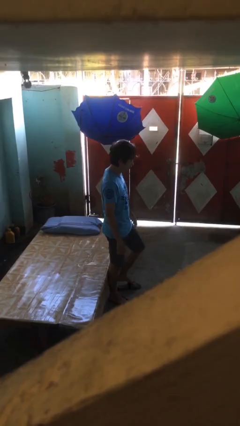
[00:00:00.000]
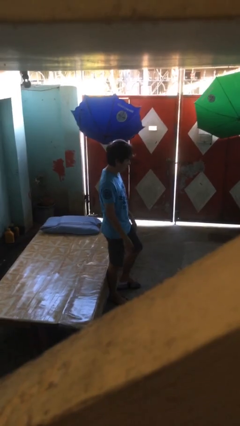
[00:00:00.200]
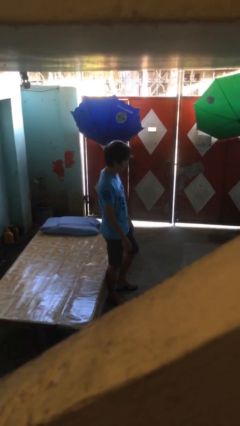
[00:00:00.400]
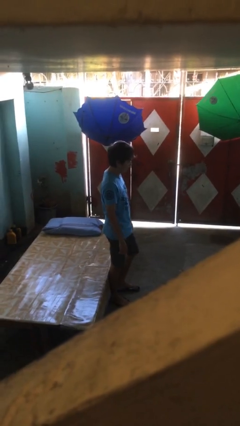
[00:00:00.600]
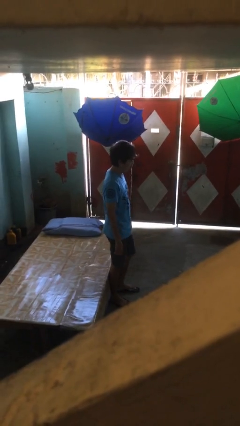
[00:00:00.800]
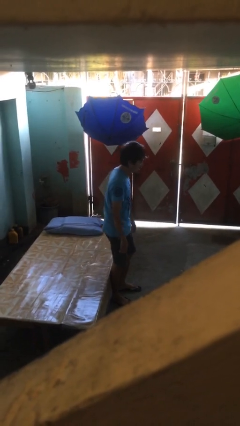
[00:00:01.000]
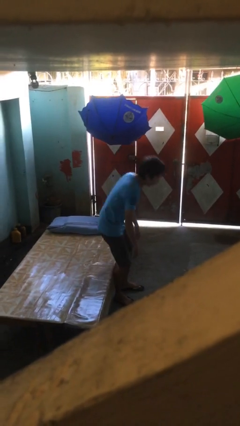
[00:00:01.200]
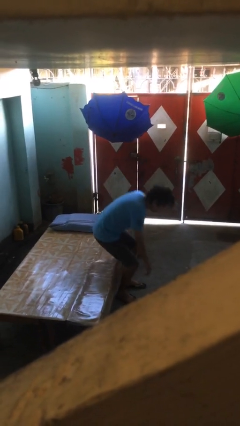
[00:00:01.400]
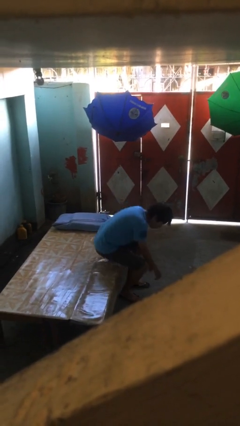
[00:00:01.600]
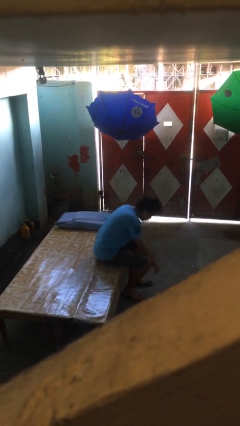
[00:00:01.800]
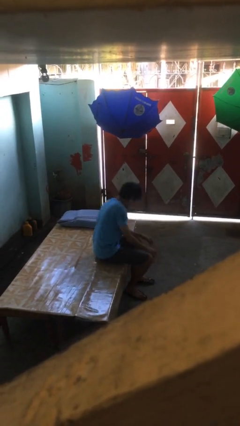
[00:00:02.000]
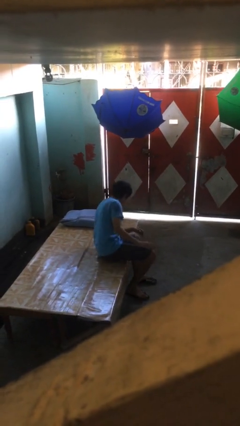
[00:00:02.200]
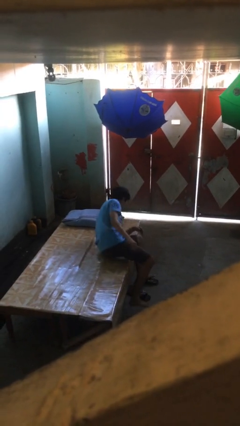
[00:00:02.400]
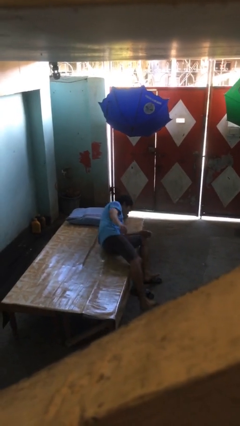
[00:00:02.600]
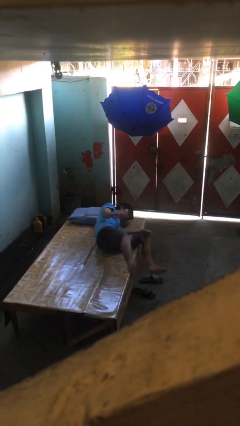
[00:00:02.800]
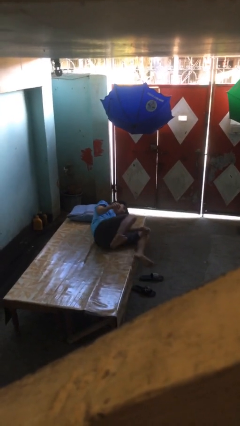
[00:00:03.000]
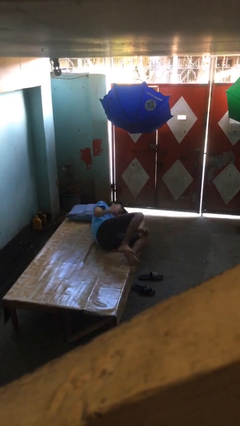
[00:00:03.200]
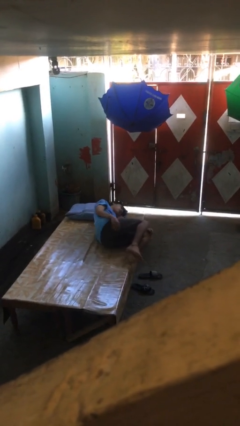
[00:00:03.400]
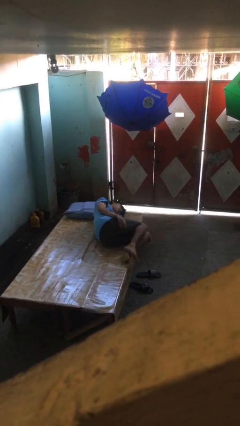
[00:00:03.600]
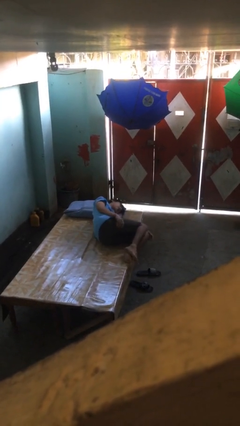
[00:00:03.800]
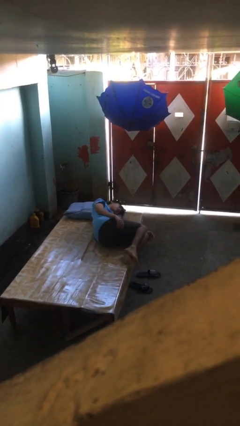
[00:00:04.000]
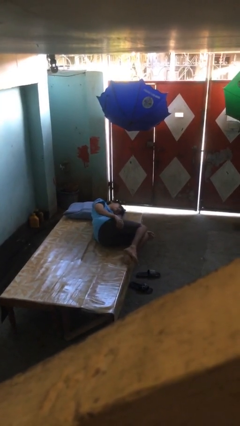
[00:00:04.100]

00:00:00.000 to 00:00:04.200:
person lies down on bed

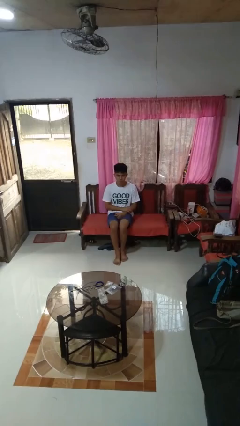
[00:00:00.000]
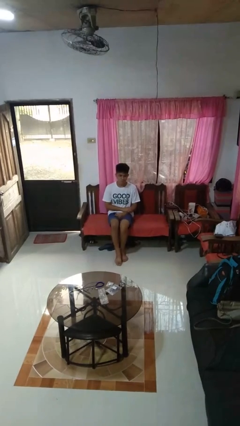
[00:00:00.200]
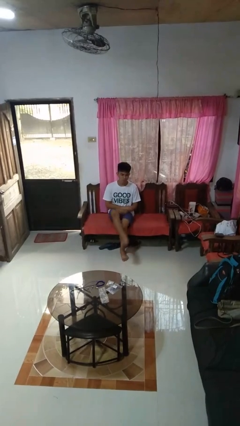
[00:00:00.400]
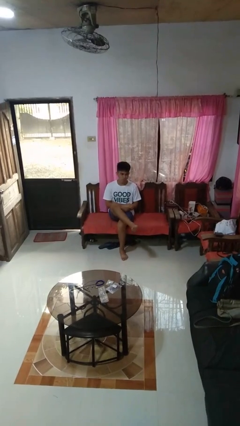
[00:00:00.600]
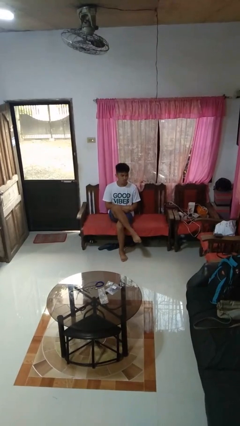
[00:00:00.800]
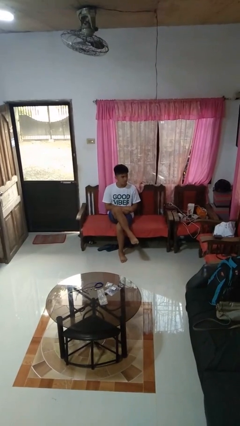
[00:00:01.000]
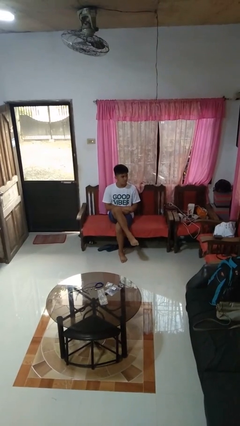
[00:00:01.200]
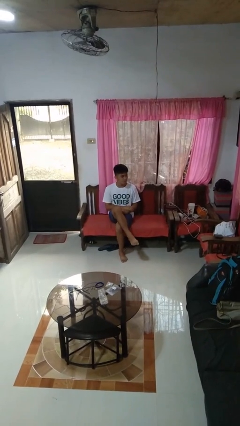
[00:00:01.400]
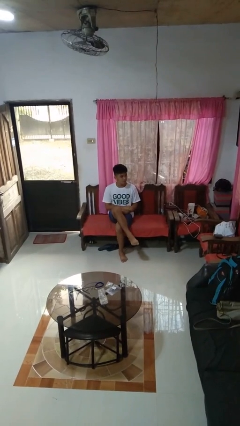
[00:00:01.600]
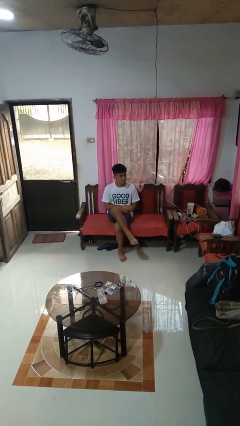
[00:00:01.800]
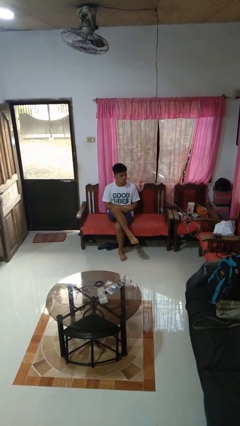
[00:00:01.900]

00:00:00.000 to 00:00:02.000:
person crosses legs

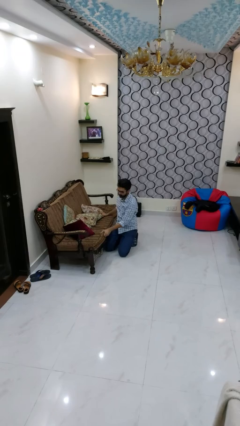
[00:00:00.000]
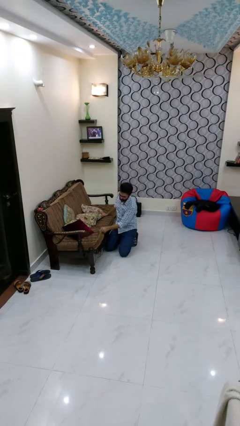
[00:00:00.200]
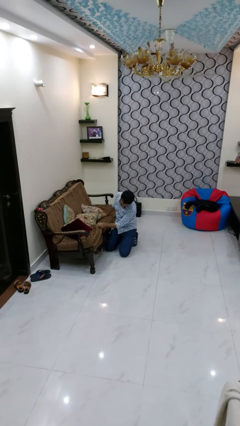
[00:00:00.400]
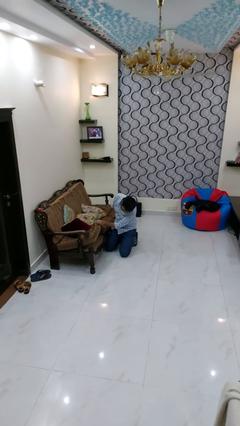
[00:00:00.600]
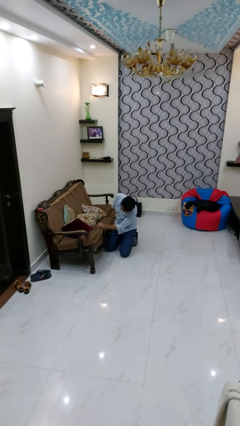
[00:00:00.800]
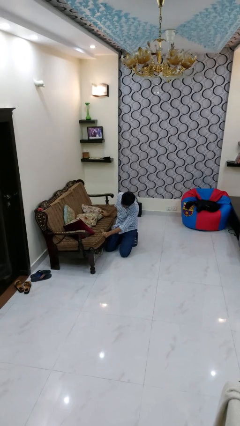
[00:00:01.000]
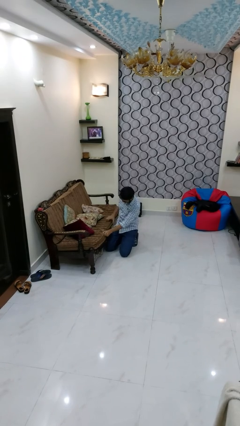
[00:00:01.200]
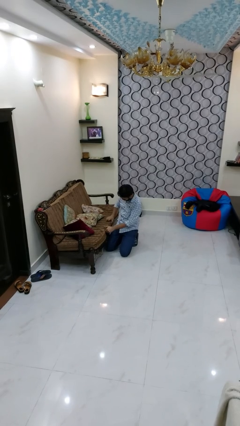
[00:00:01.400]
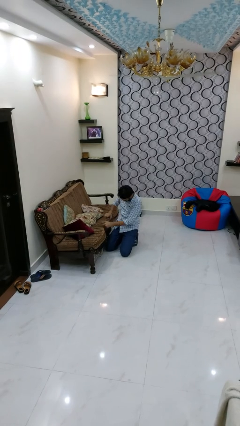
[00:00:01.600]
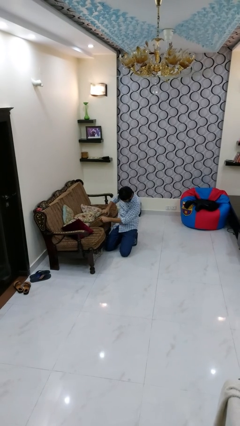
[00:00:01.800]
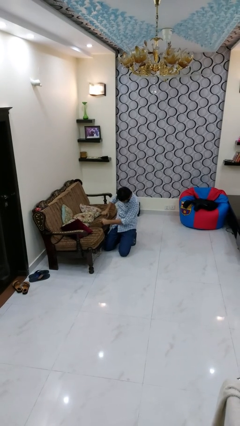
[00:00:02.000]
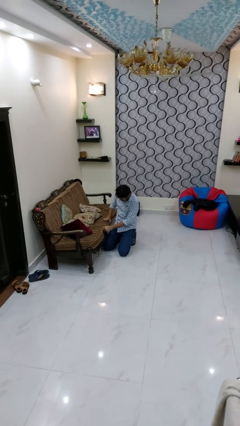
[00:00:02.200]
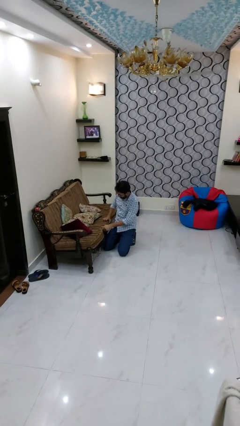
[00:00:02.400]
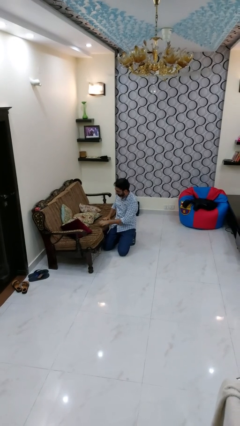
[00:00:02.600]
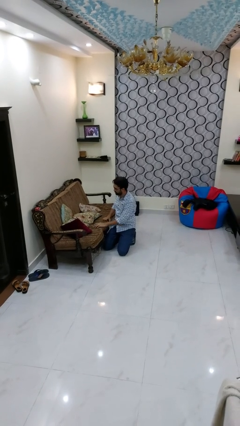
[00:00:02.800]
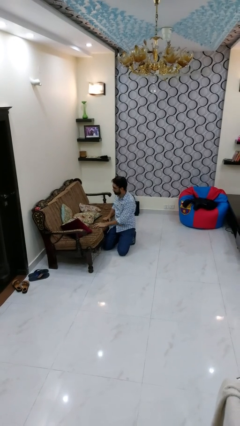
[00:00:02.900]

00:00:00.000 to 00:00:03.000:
person searches in couch

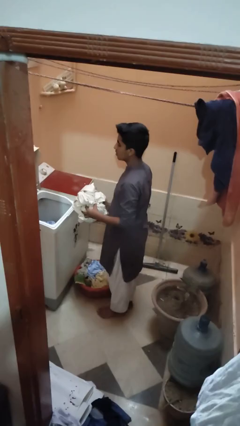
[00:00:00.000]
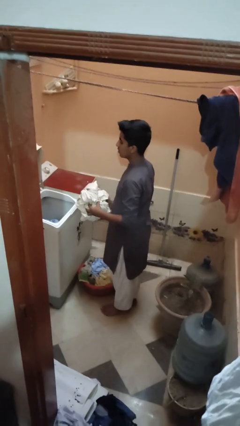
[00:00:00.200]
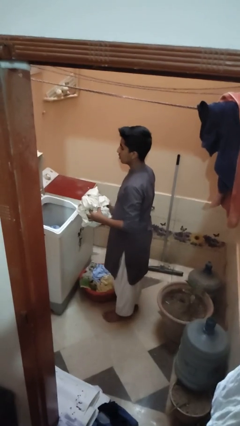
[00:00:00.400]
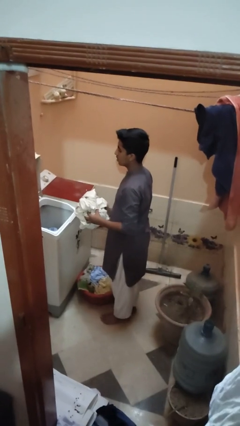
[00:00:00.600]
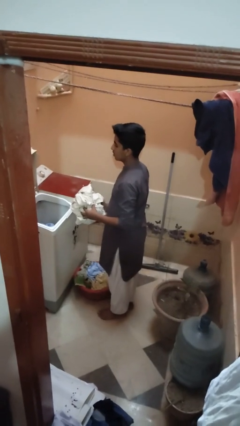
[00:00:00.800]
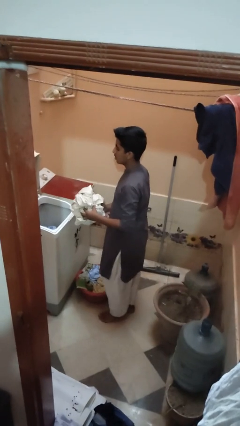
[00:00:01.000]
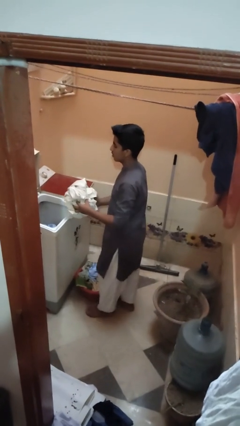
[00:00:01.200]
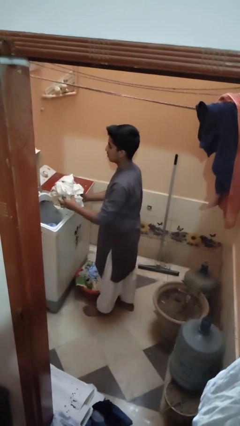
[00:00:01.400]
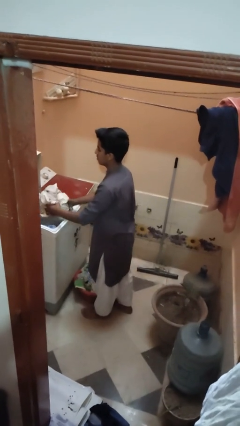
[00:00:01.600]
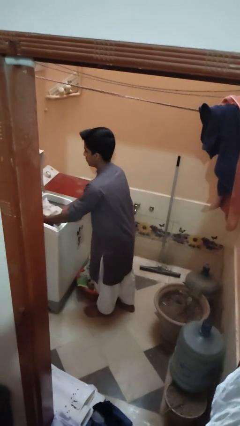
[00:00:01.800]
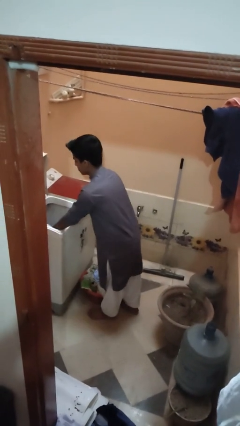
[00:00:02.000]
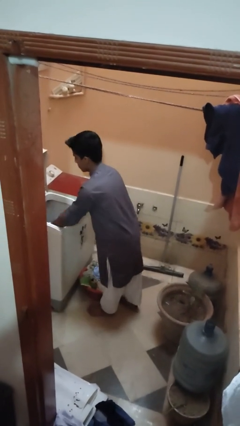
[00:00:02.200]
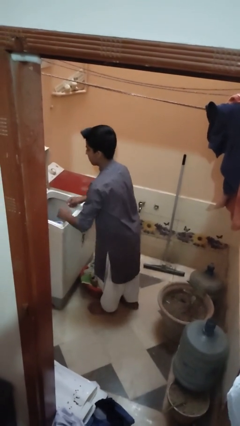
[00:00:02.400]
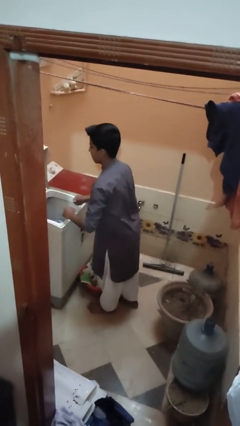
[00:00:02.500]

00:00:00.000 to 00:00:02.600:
person loads clotheswasher

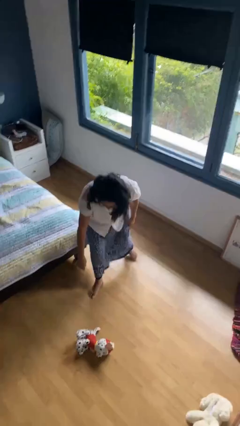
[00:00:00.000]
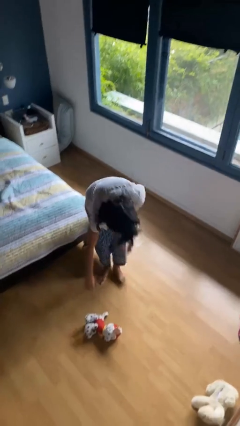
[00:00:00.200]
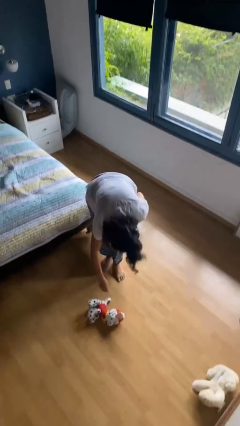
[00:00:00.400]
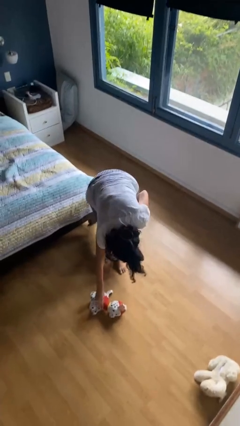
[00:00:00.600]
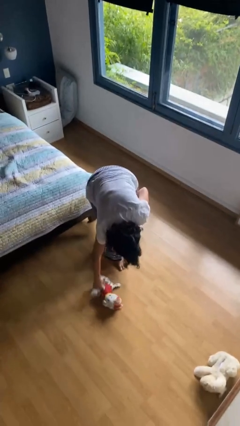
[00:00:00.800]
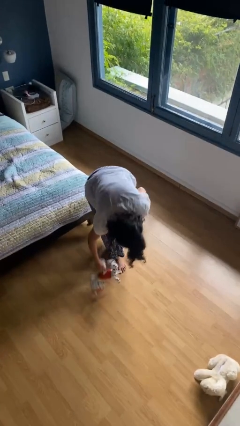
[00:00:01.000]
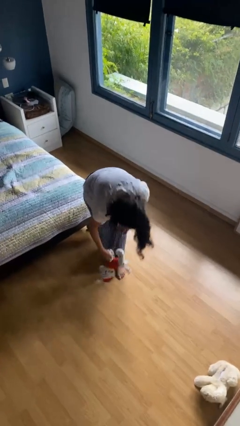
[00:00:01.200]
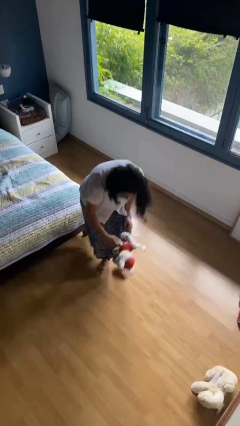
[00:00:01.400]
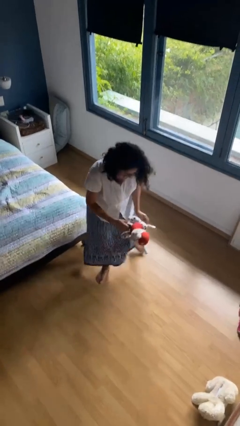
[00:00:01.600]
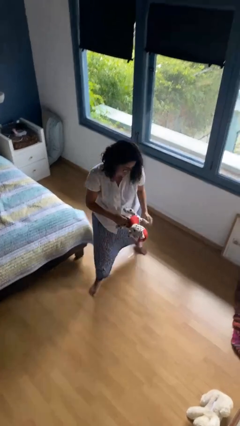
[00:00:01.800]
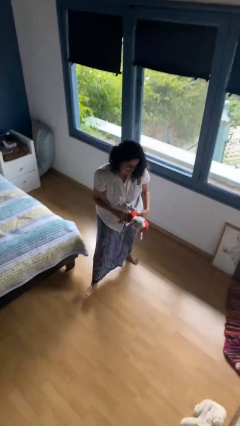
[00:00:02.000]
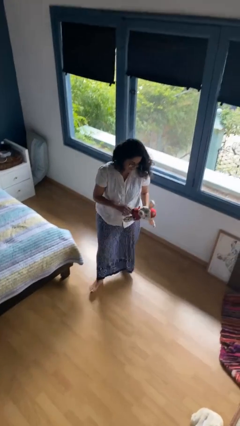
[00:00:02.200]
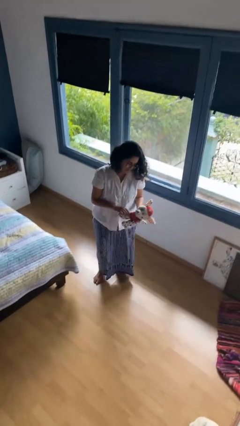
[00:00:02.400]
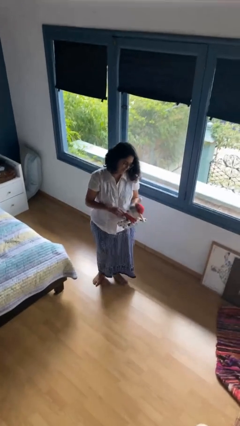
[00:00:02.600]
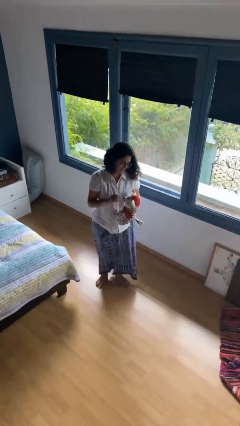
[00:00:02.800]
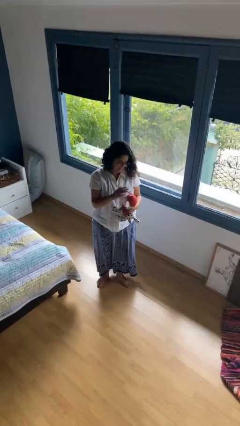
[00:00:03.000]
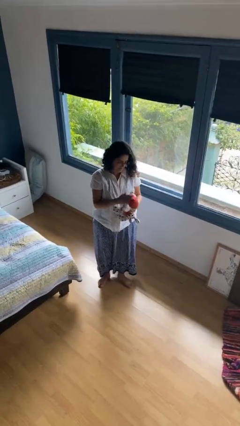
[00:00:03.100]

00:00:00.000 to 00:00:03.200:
person picks up object from floor

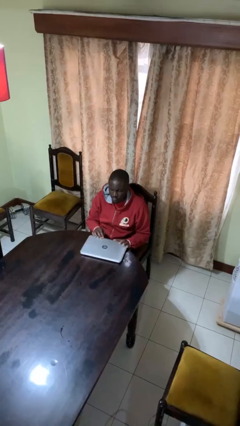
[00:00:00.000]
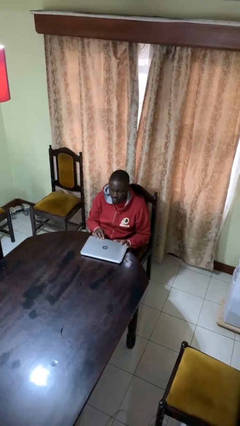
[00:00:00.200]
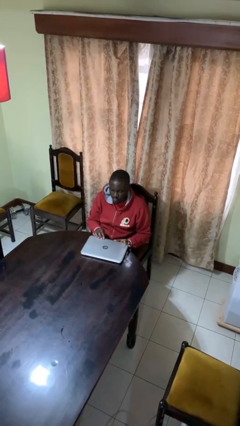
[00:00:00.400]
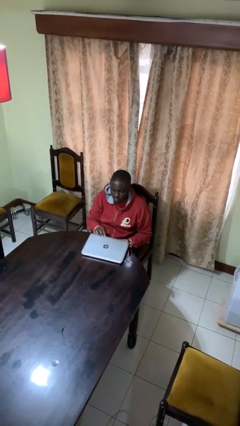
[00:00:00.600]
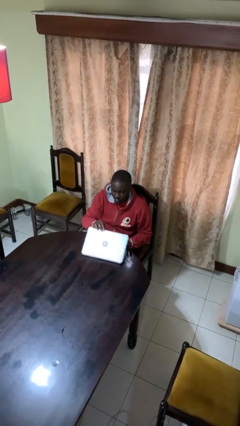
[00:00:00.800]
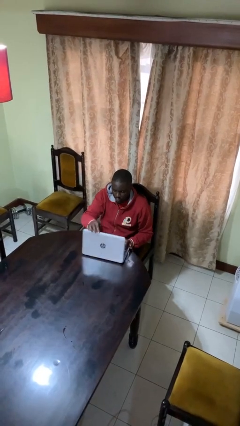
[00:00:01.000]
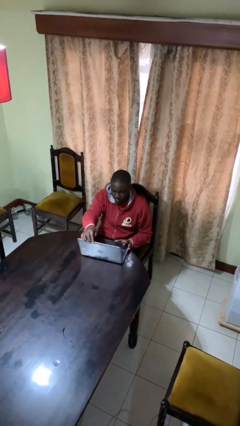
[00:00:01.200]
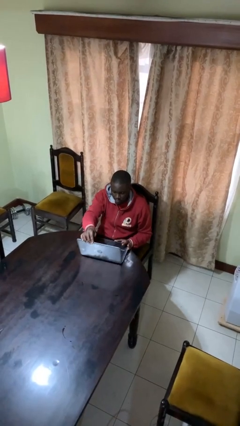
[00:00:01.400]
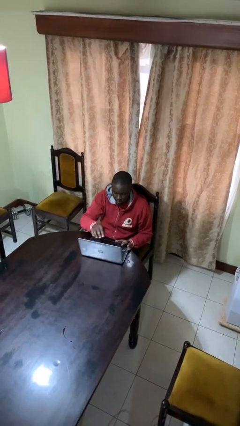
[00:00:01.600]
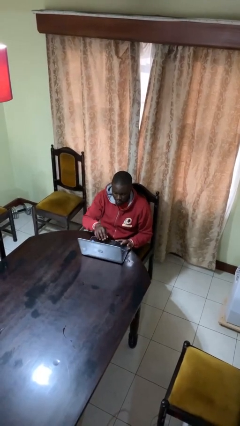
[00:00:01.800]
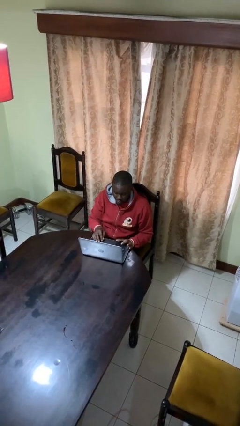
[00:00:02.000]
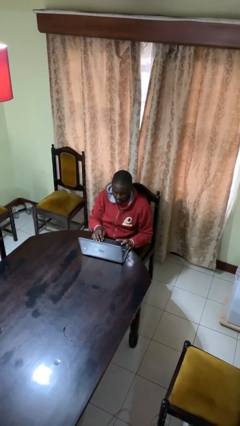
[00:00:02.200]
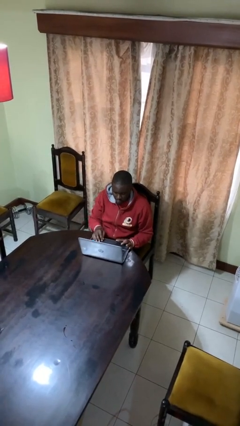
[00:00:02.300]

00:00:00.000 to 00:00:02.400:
person opens laptop
